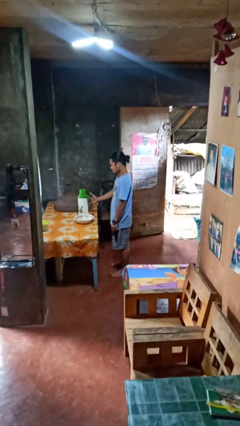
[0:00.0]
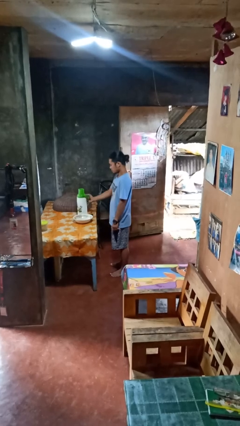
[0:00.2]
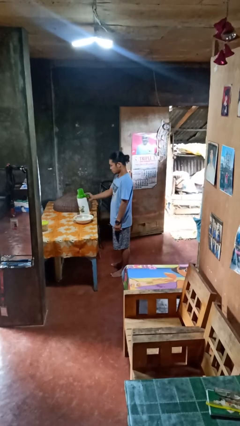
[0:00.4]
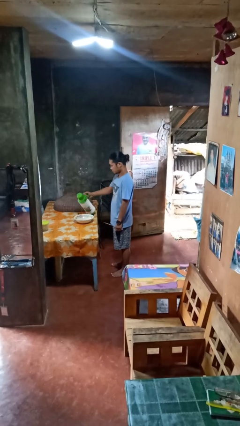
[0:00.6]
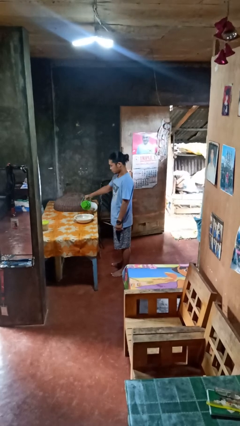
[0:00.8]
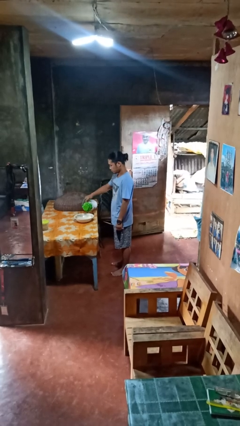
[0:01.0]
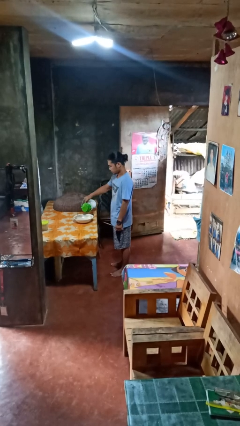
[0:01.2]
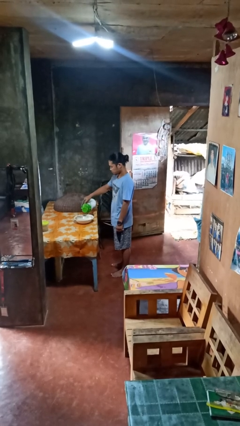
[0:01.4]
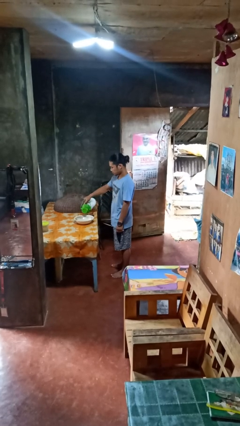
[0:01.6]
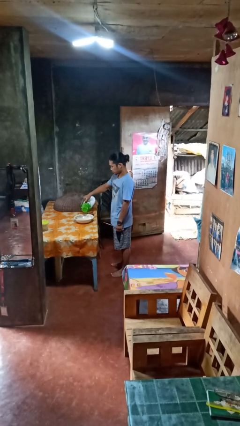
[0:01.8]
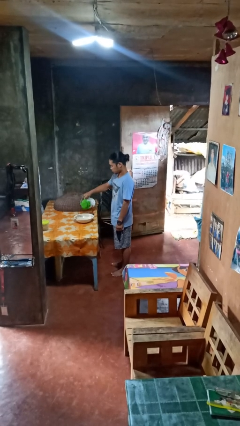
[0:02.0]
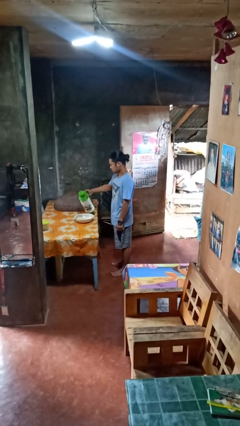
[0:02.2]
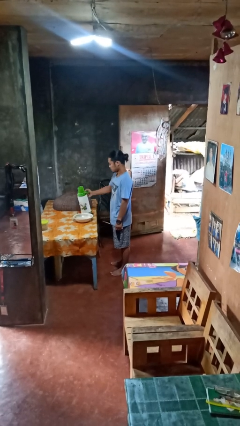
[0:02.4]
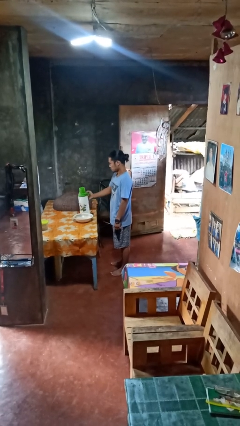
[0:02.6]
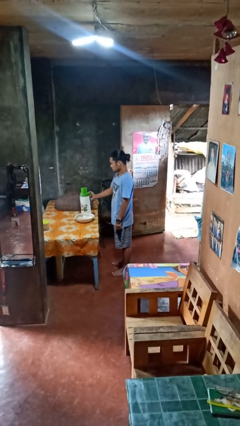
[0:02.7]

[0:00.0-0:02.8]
person pours into bowl

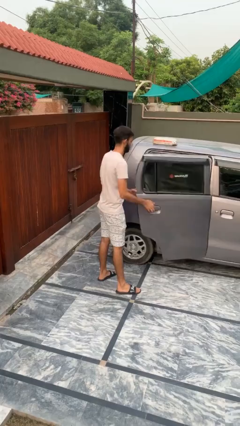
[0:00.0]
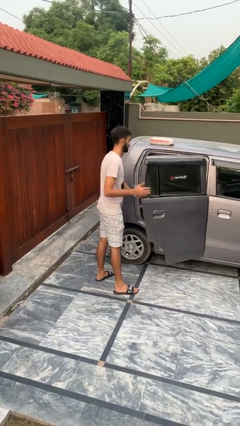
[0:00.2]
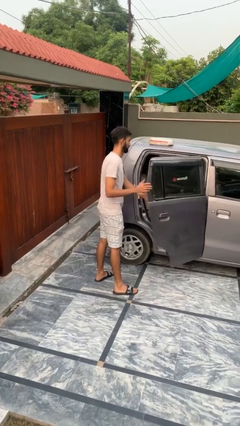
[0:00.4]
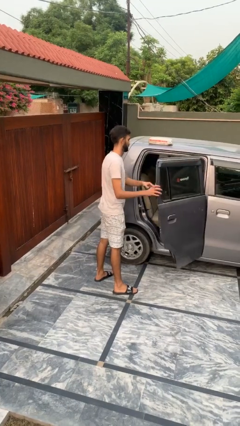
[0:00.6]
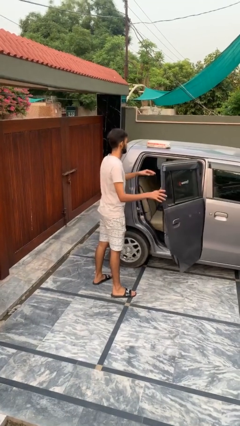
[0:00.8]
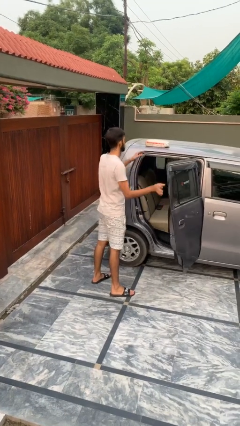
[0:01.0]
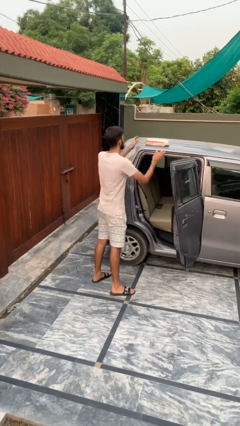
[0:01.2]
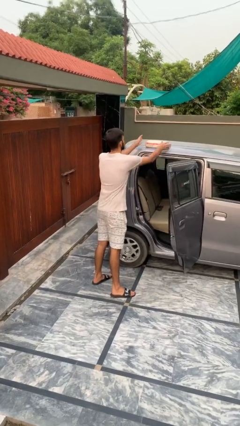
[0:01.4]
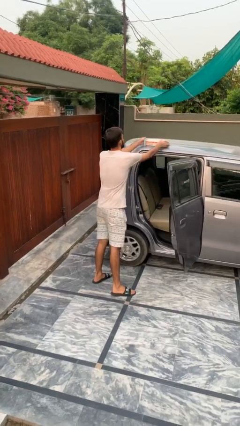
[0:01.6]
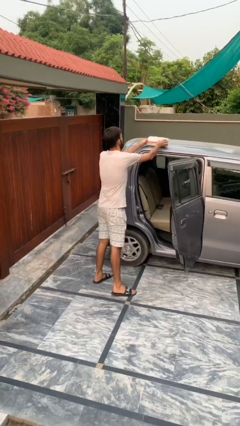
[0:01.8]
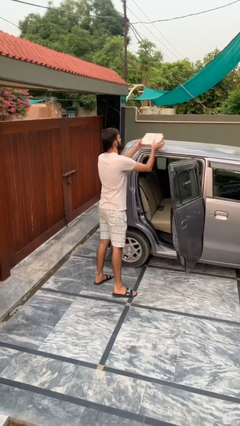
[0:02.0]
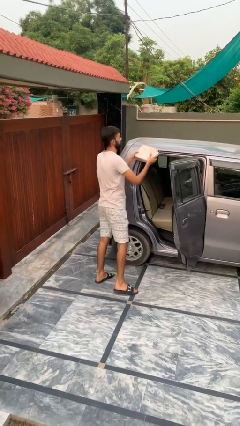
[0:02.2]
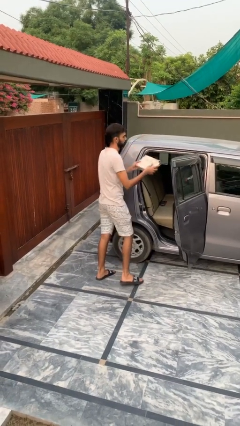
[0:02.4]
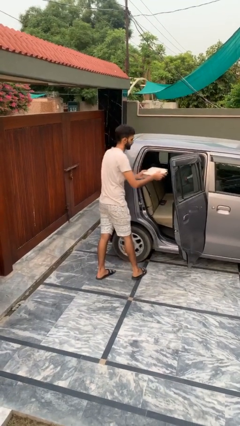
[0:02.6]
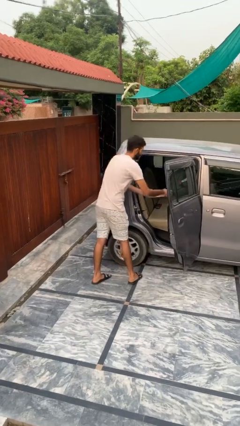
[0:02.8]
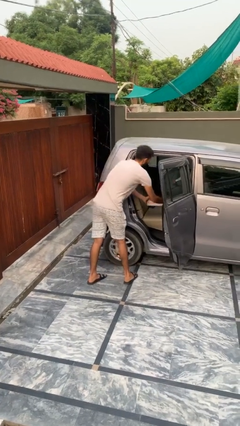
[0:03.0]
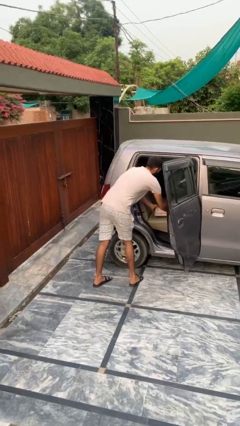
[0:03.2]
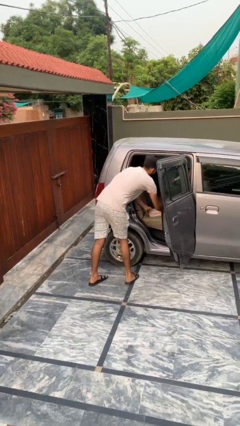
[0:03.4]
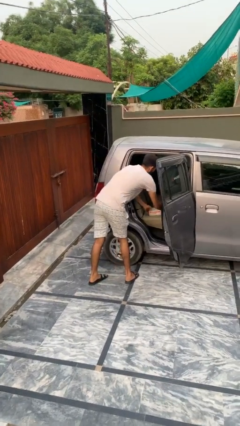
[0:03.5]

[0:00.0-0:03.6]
person loads car

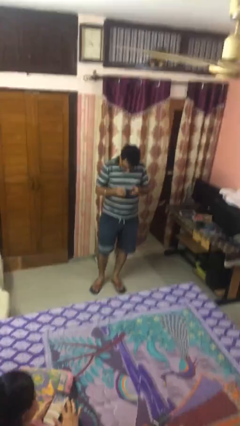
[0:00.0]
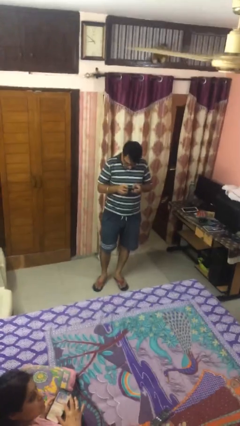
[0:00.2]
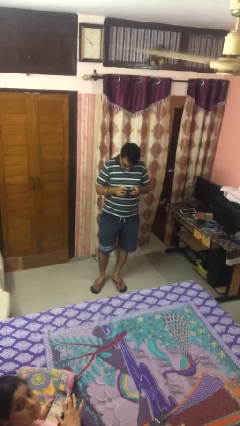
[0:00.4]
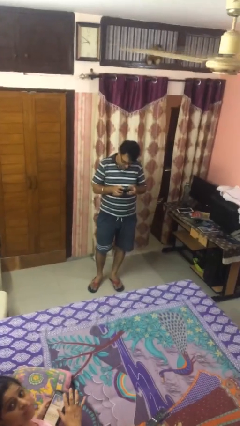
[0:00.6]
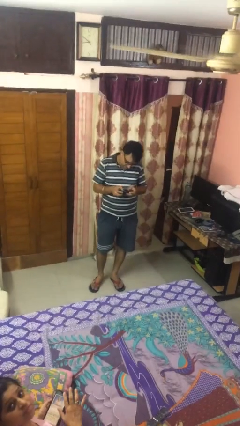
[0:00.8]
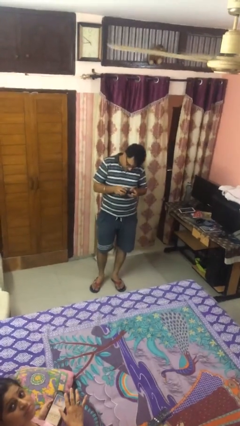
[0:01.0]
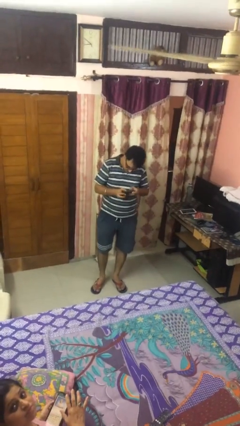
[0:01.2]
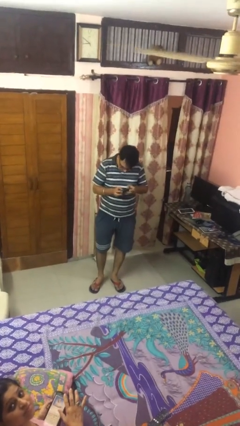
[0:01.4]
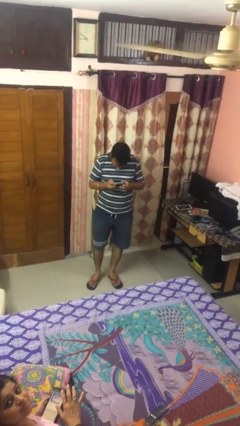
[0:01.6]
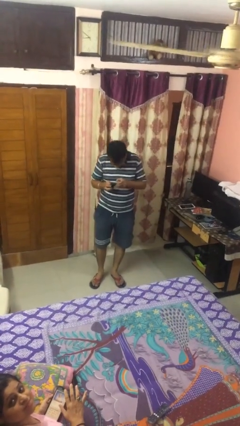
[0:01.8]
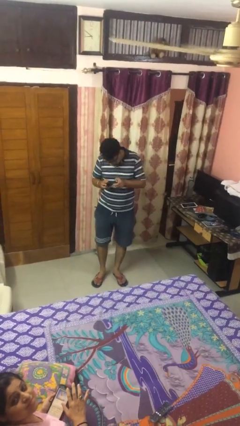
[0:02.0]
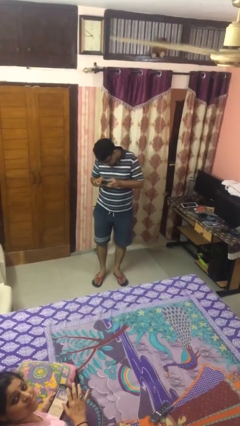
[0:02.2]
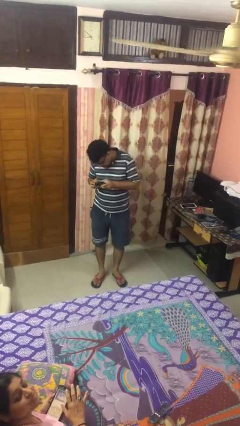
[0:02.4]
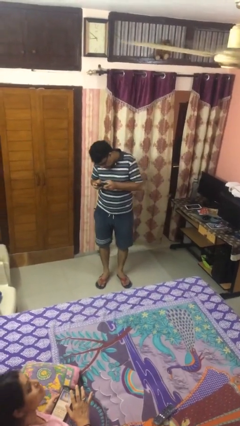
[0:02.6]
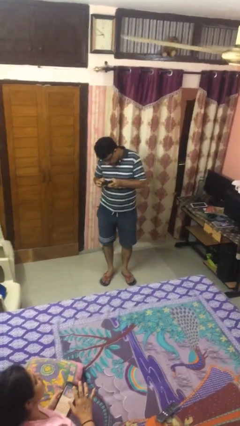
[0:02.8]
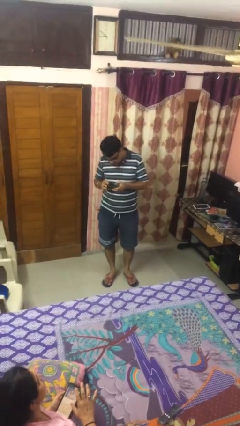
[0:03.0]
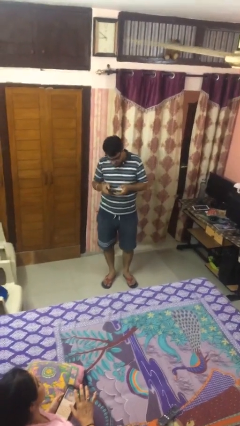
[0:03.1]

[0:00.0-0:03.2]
person interacts with handheld game

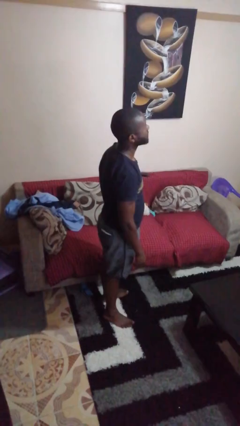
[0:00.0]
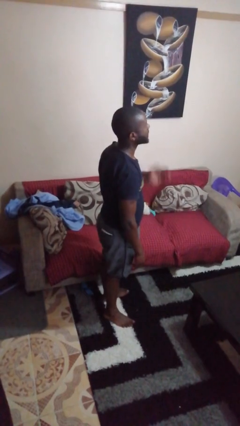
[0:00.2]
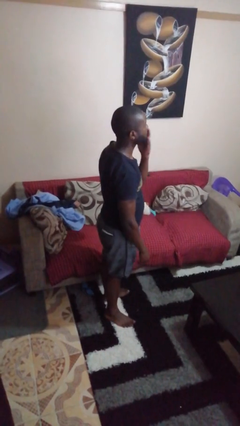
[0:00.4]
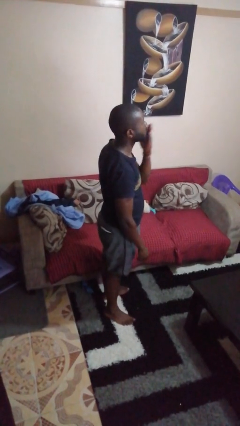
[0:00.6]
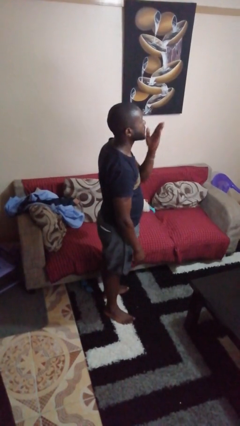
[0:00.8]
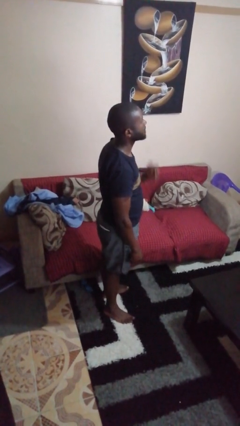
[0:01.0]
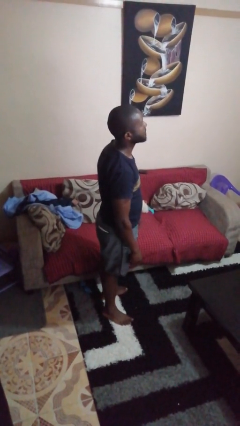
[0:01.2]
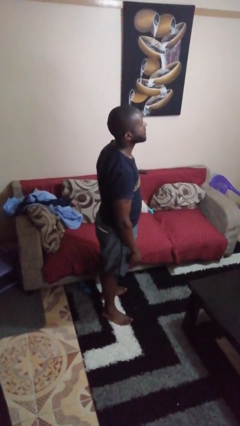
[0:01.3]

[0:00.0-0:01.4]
person gestures blow kiss

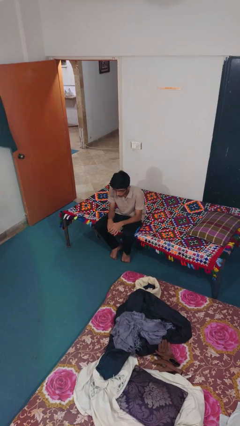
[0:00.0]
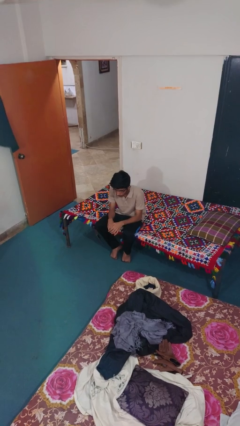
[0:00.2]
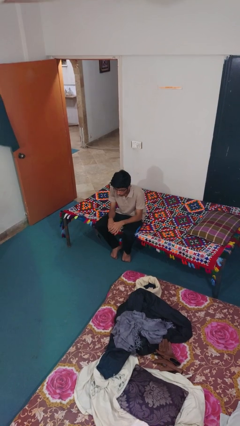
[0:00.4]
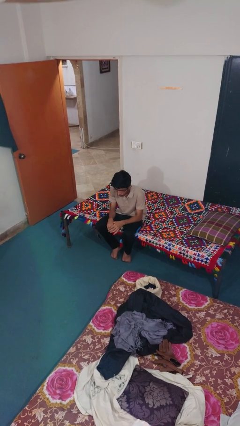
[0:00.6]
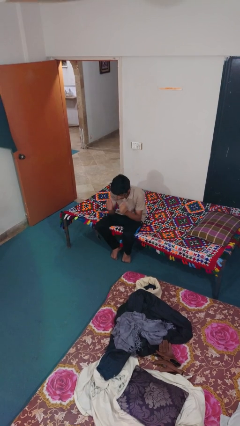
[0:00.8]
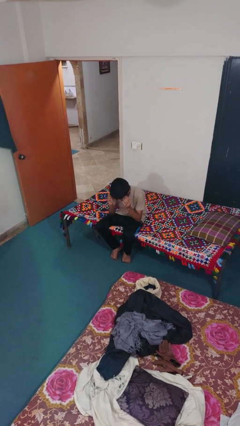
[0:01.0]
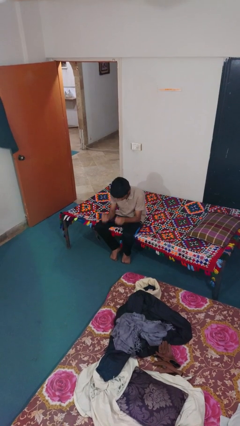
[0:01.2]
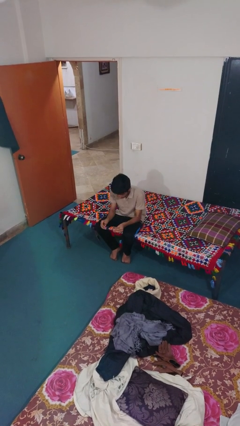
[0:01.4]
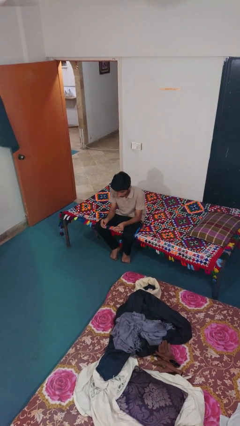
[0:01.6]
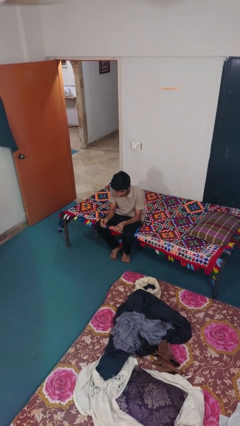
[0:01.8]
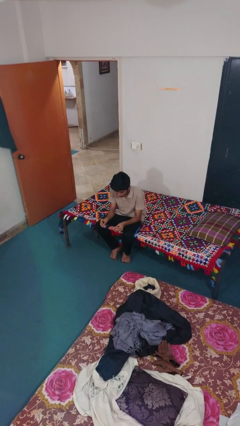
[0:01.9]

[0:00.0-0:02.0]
person takes off glasses

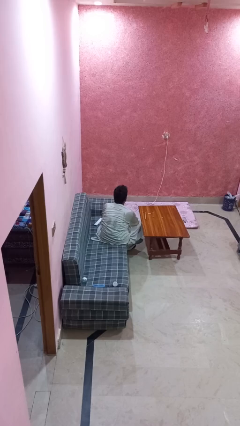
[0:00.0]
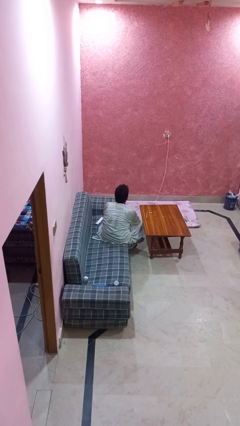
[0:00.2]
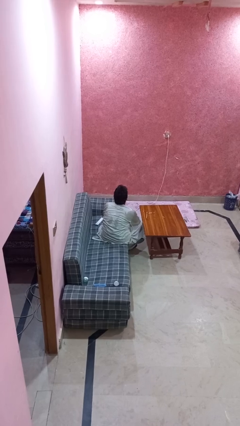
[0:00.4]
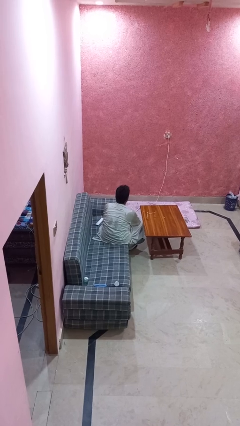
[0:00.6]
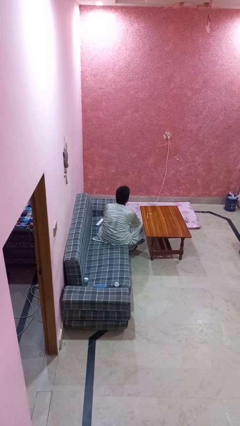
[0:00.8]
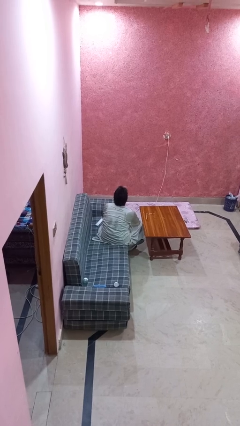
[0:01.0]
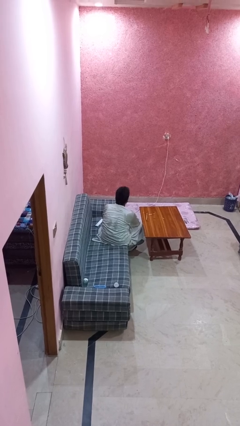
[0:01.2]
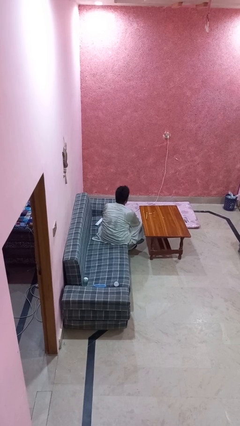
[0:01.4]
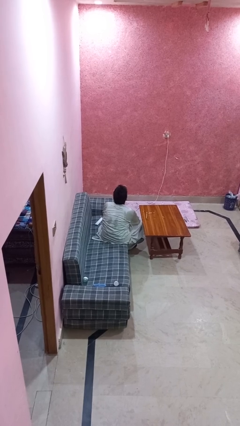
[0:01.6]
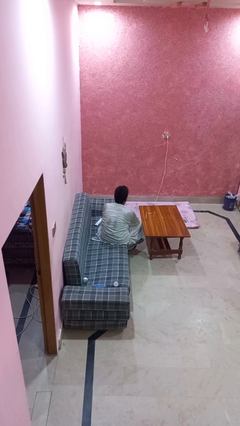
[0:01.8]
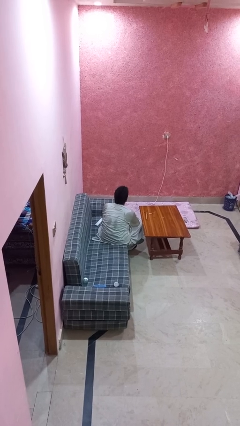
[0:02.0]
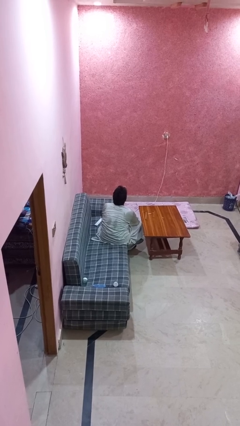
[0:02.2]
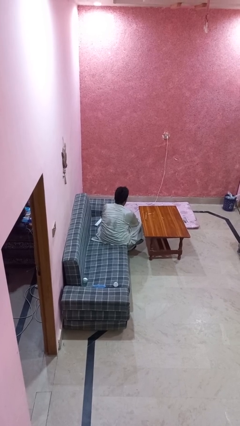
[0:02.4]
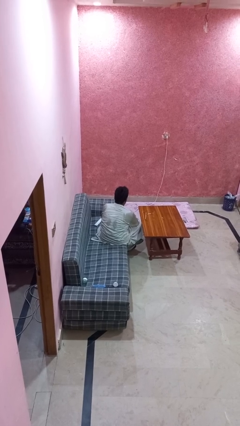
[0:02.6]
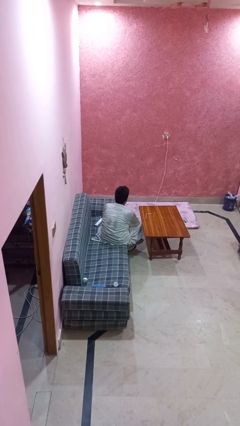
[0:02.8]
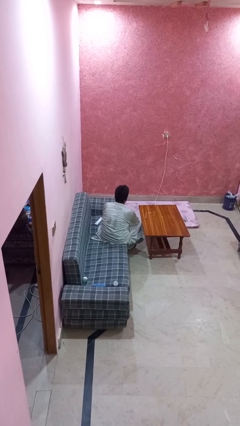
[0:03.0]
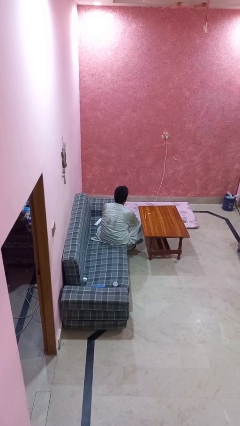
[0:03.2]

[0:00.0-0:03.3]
person nods head

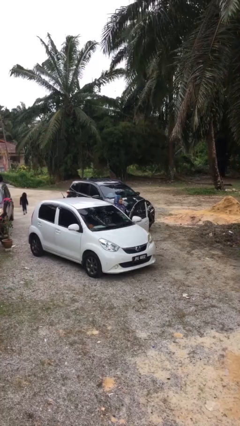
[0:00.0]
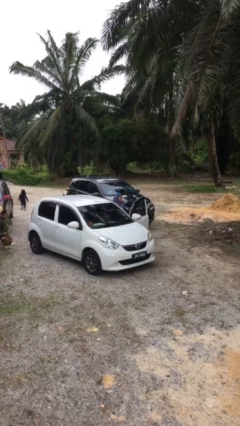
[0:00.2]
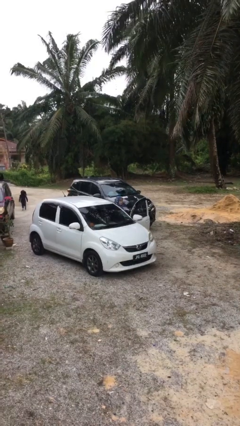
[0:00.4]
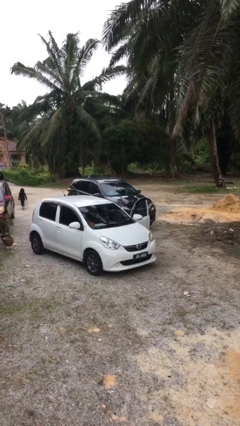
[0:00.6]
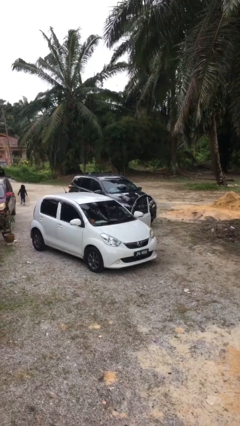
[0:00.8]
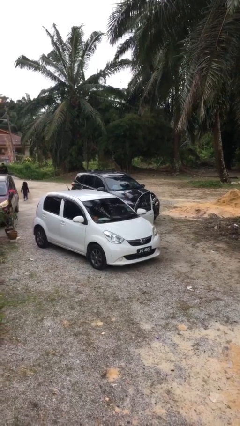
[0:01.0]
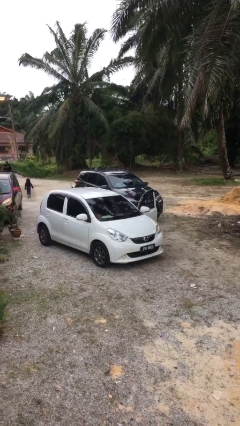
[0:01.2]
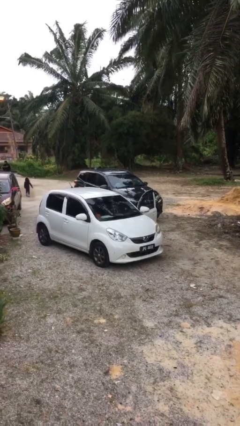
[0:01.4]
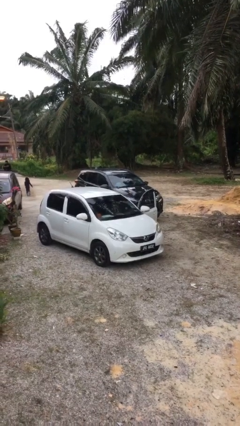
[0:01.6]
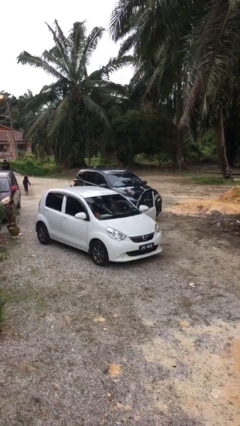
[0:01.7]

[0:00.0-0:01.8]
person enters car
